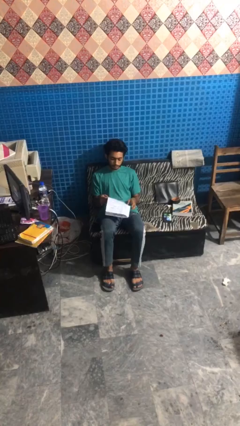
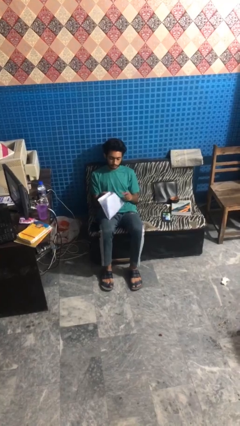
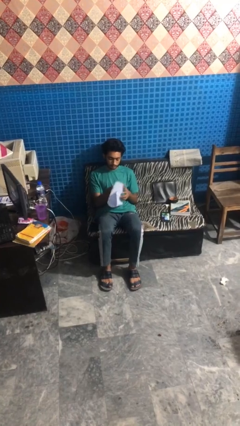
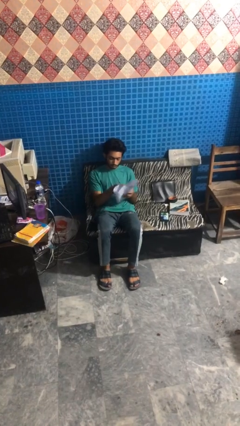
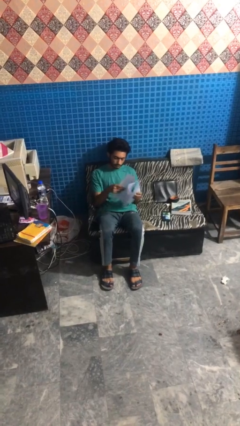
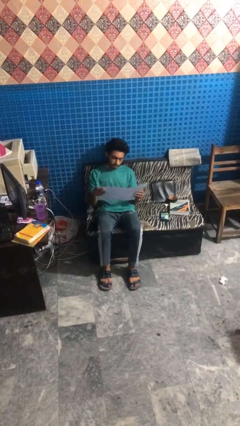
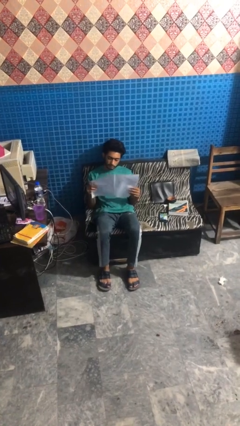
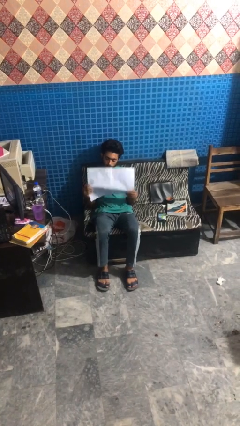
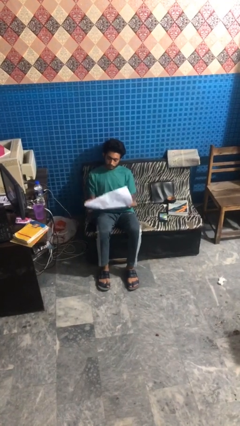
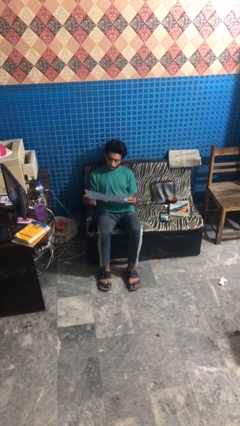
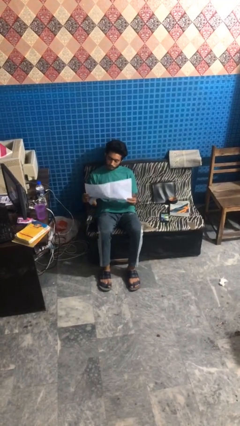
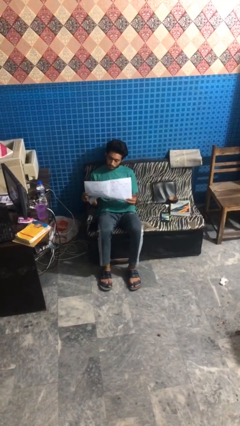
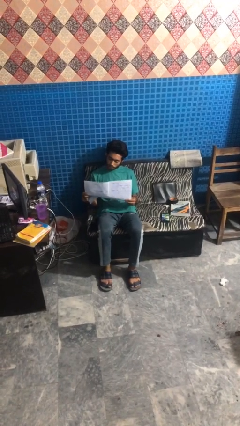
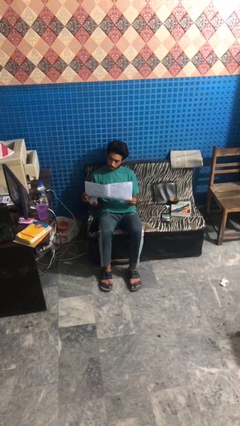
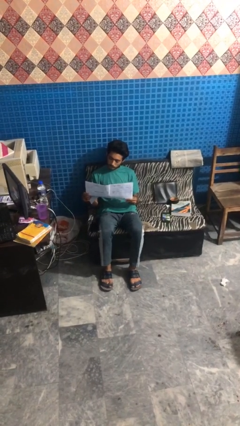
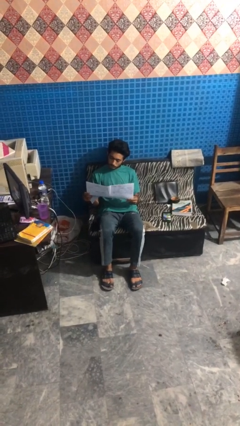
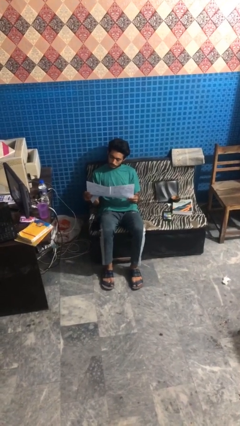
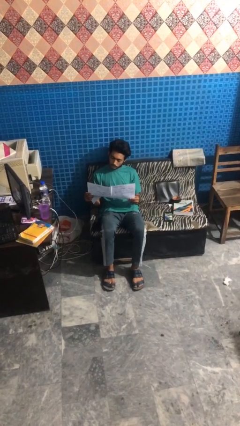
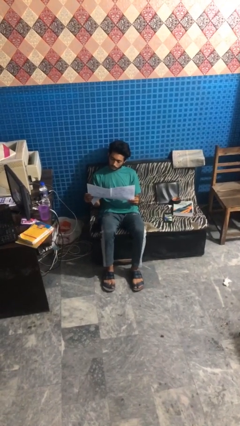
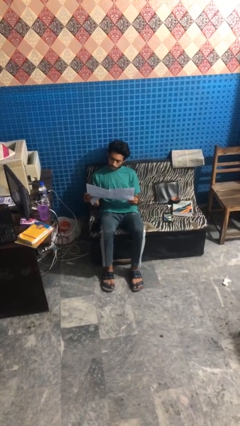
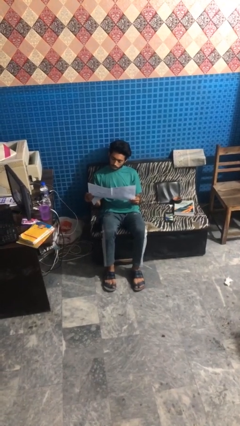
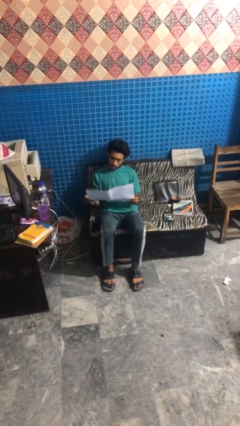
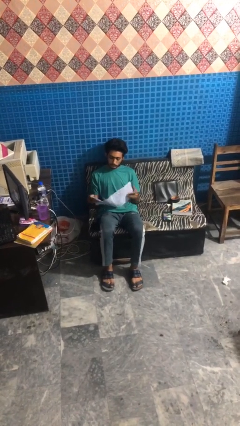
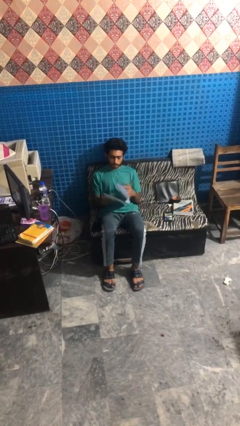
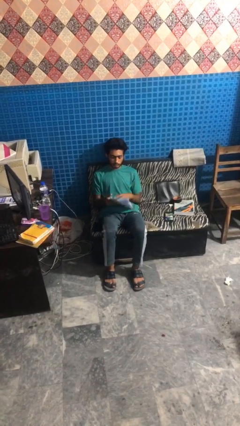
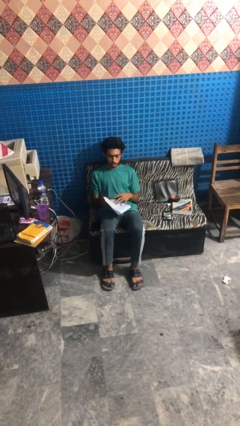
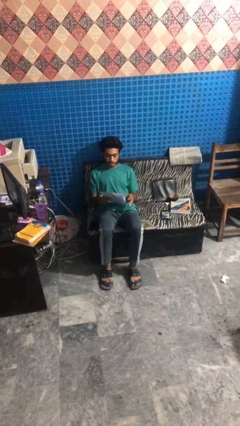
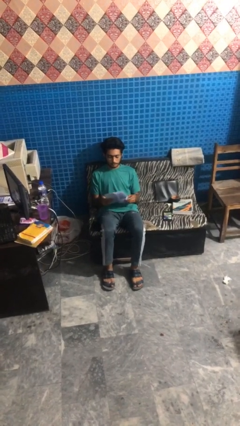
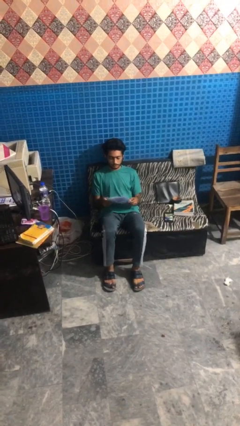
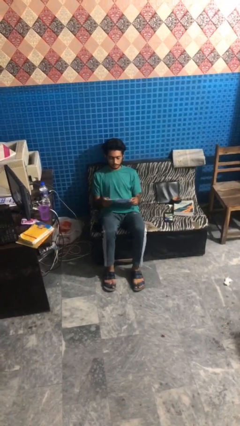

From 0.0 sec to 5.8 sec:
person reads newspaper

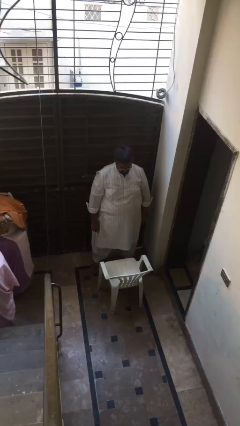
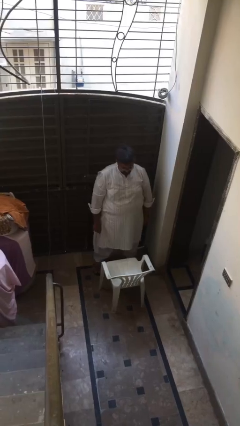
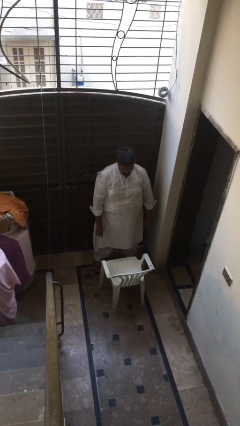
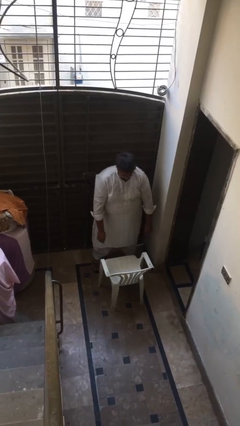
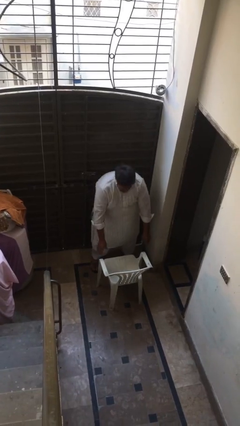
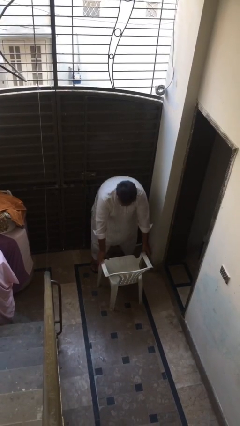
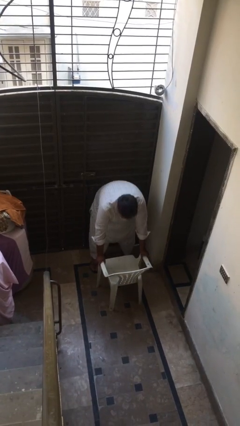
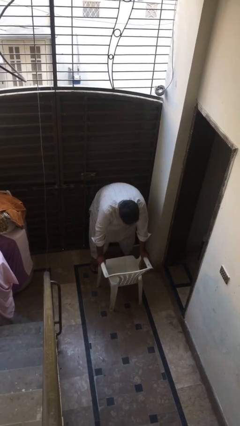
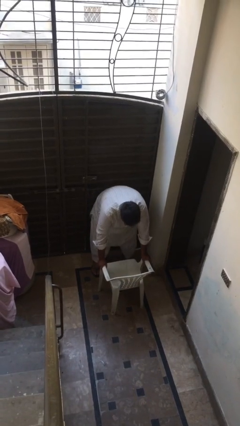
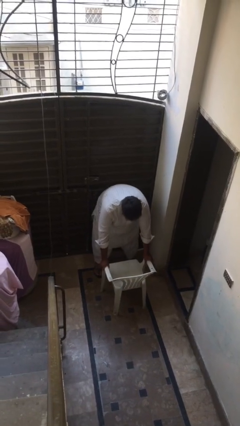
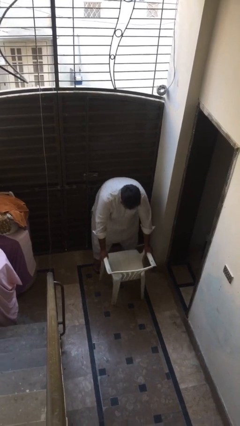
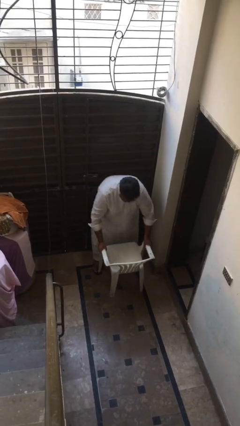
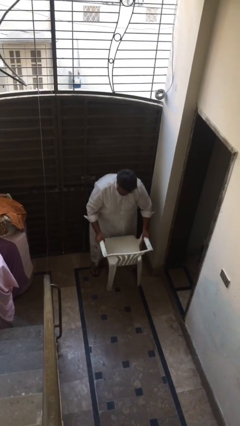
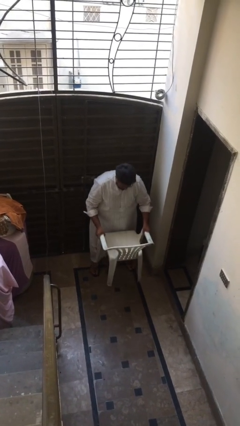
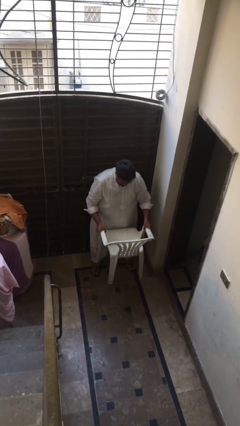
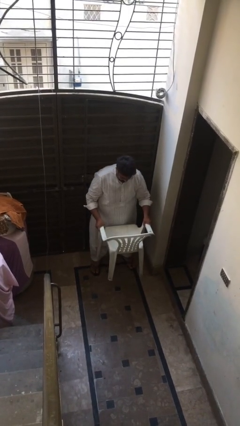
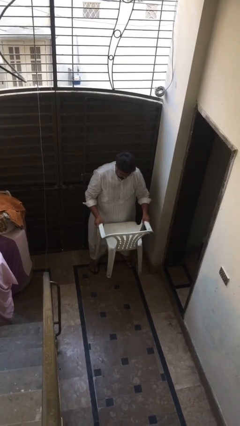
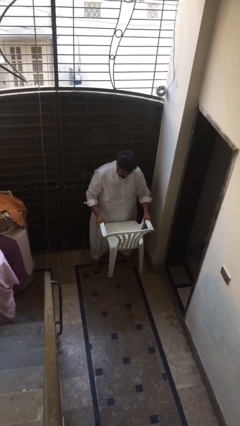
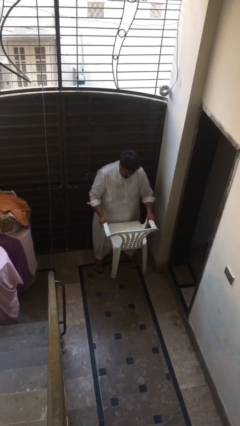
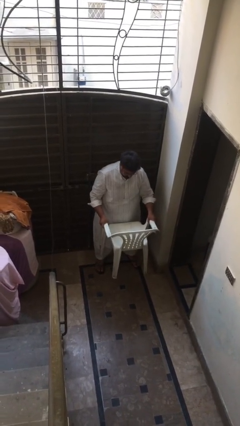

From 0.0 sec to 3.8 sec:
person picks up object from floor

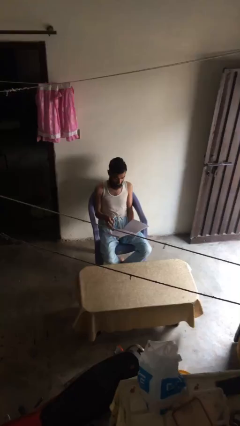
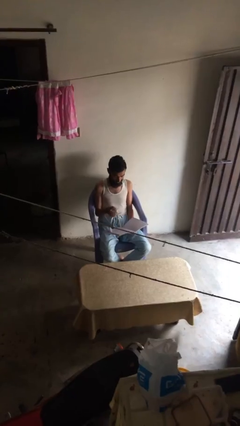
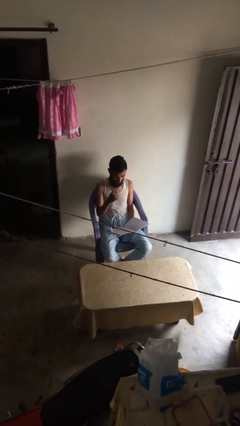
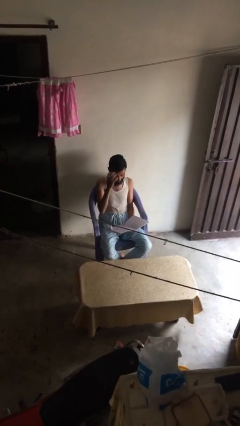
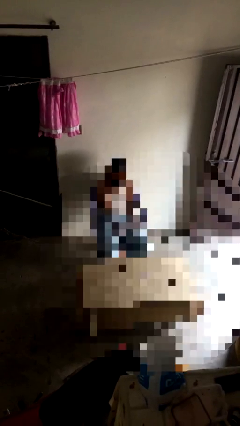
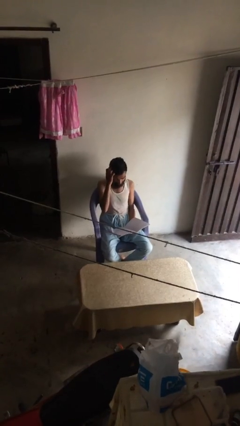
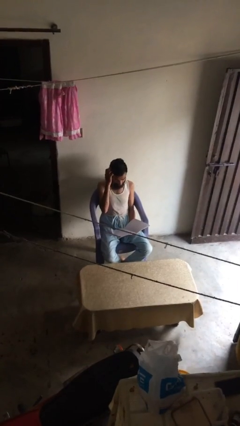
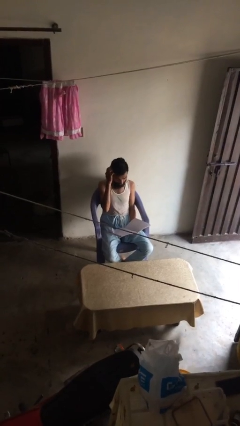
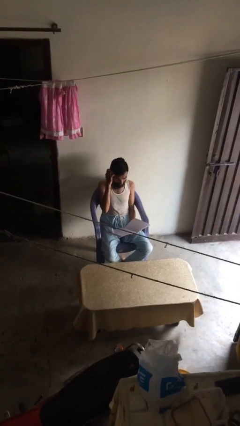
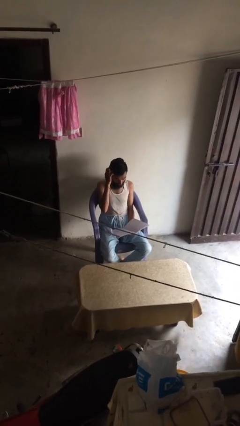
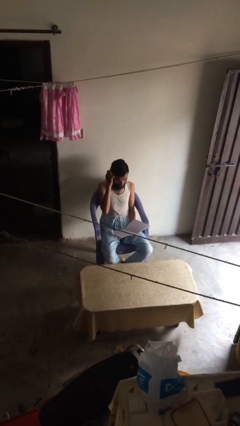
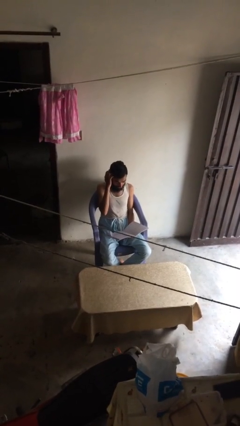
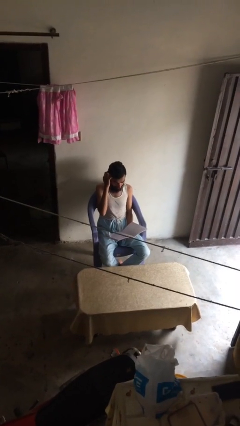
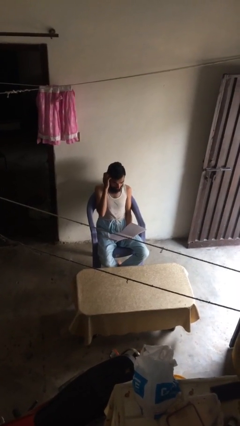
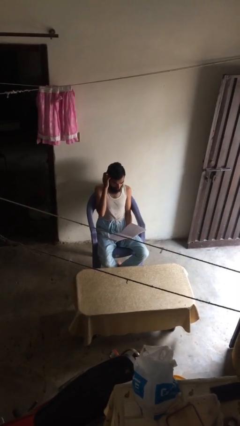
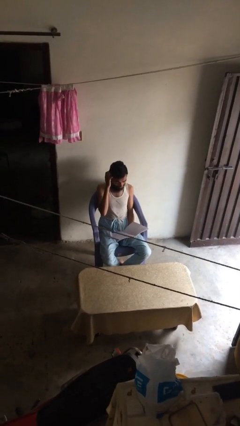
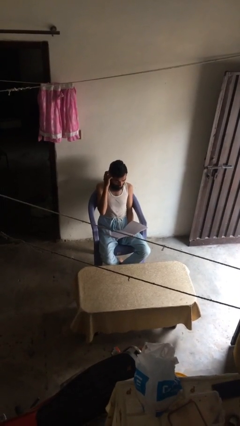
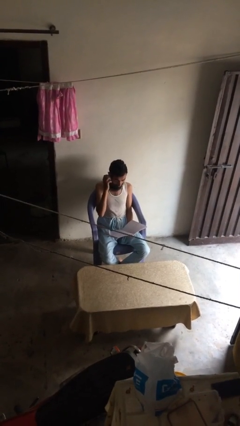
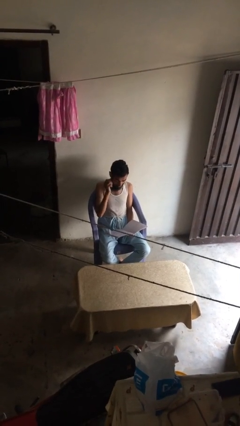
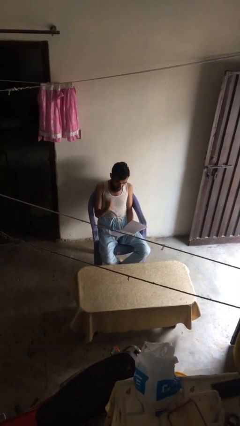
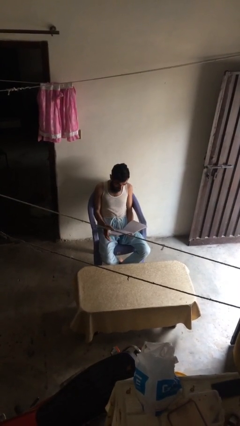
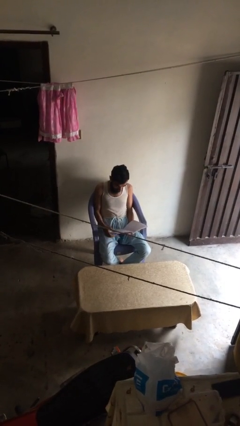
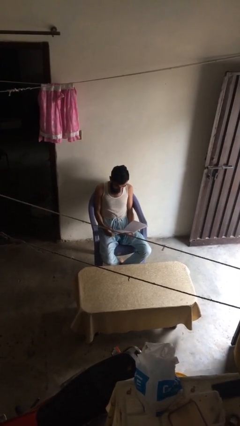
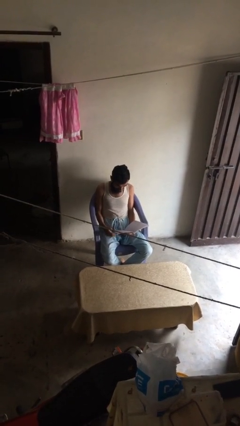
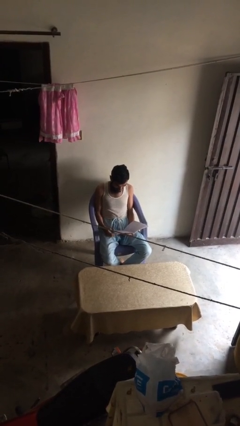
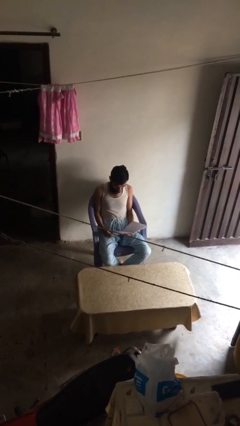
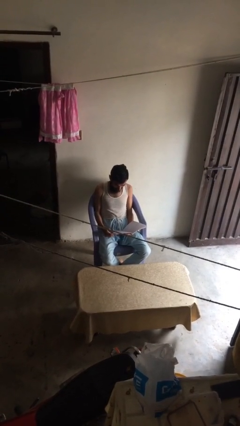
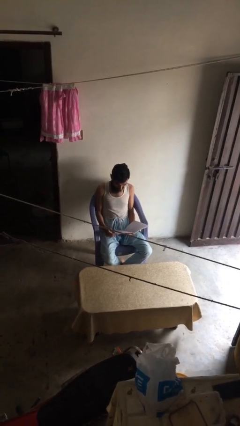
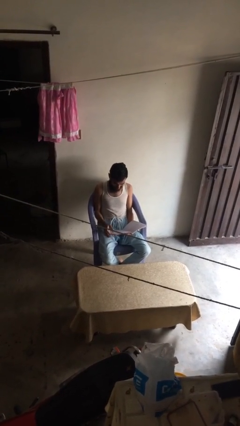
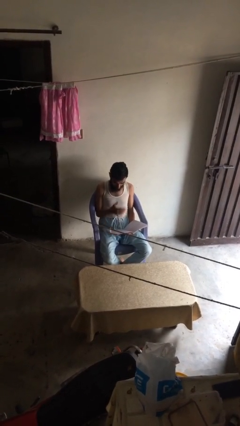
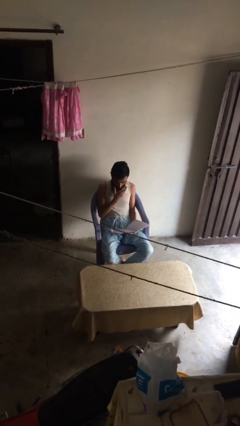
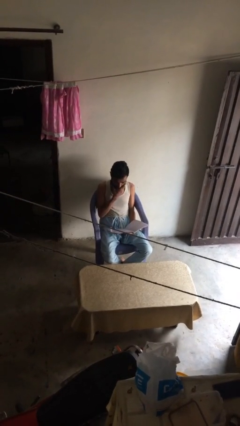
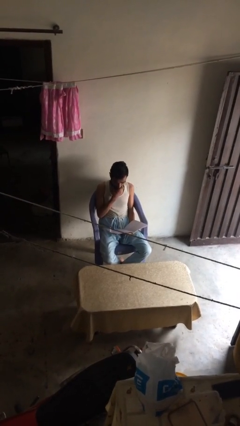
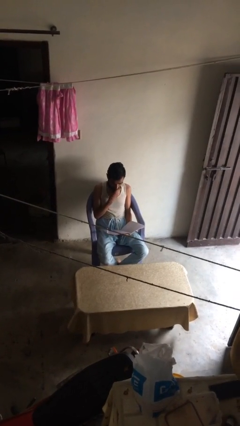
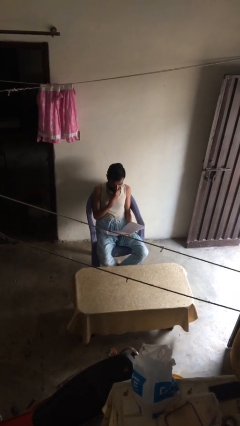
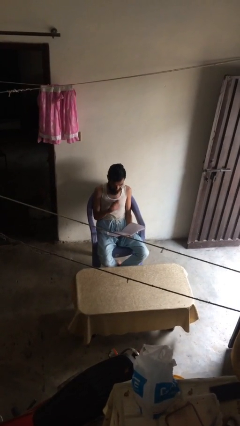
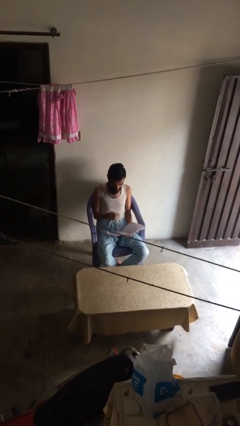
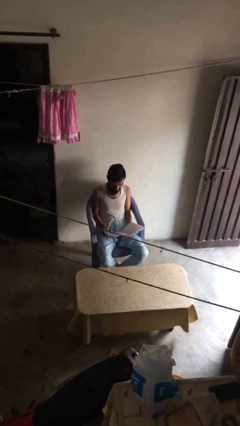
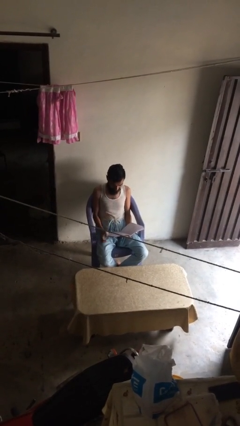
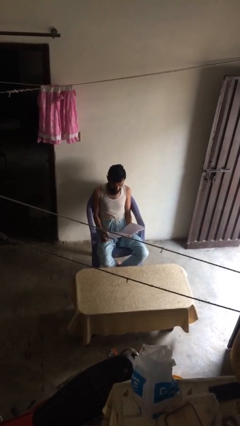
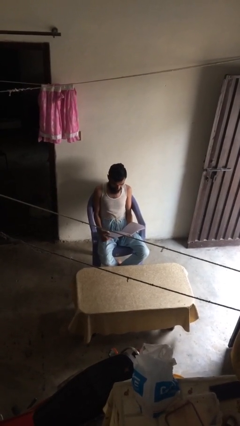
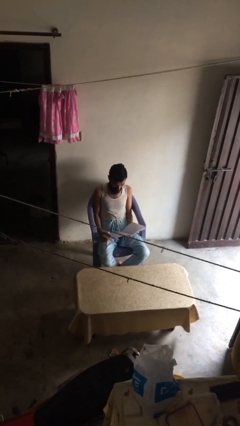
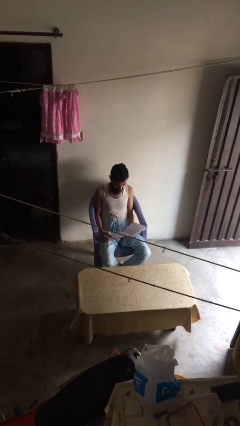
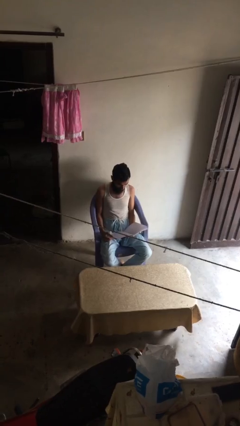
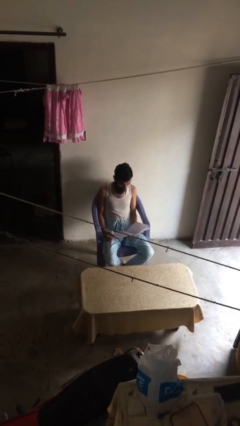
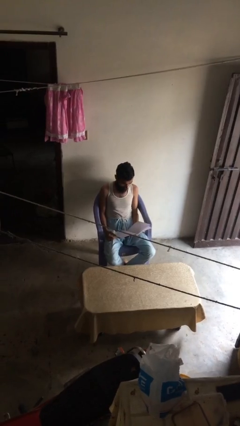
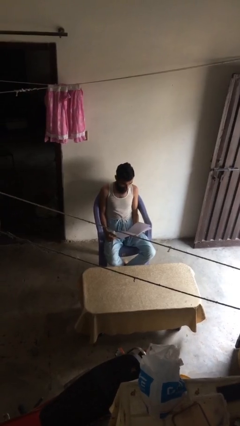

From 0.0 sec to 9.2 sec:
person reads document
